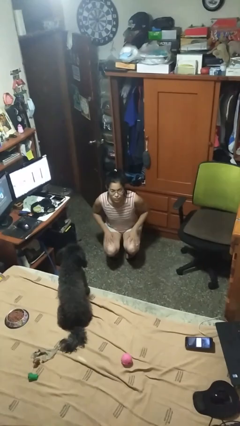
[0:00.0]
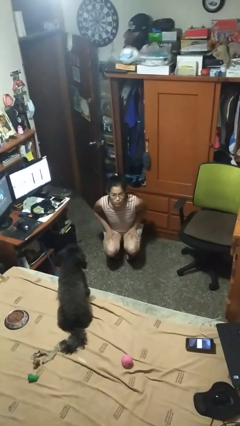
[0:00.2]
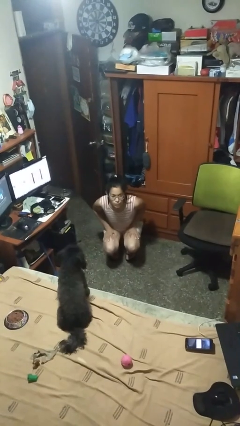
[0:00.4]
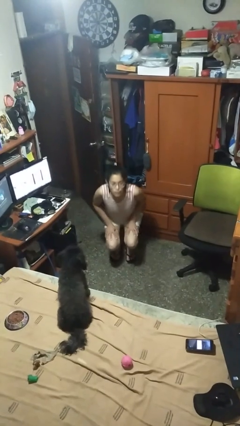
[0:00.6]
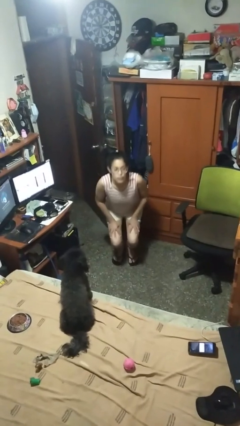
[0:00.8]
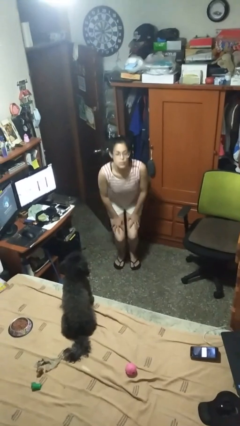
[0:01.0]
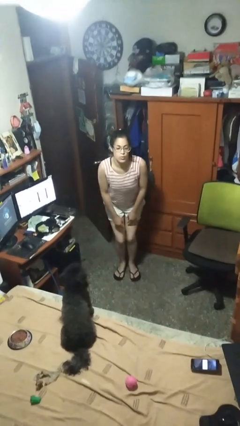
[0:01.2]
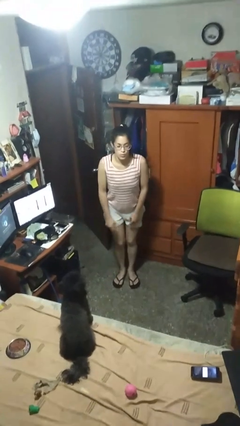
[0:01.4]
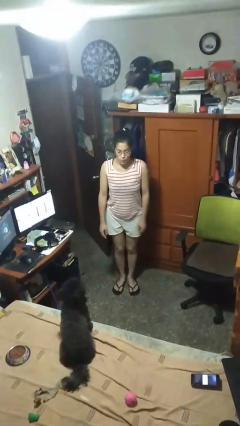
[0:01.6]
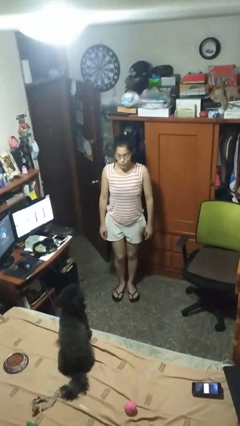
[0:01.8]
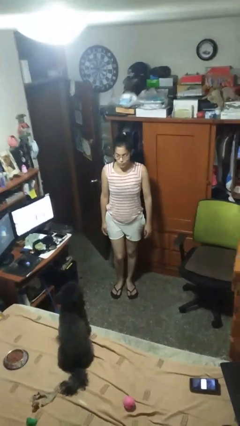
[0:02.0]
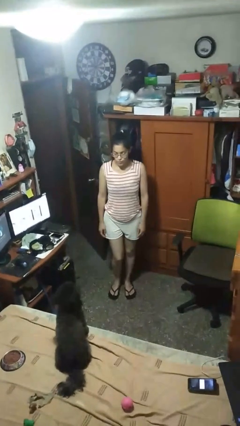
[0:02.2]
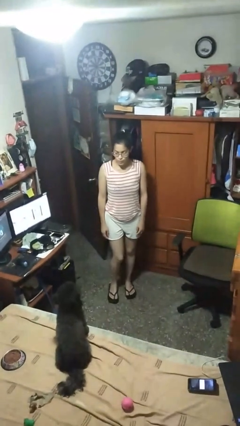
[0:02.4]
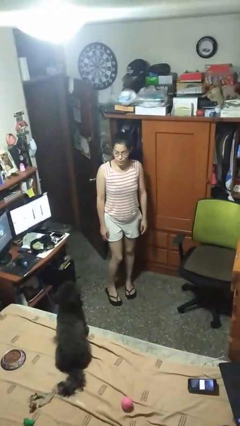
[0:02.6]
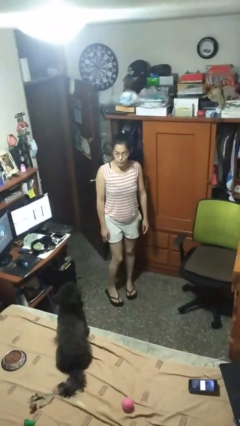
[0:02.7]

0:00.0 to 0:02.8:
person stands up

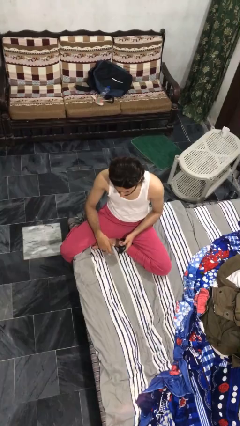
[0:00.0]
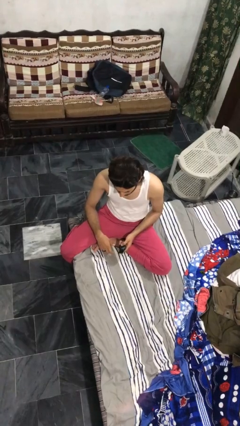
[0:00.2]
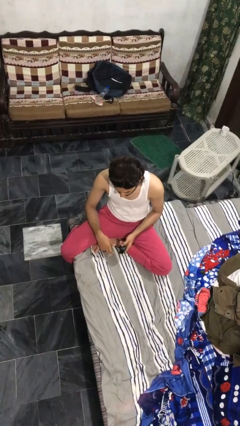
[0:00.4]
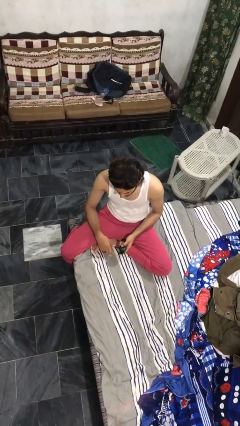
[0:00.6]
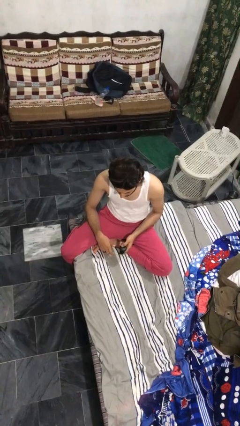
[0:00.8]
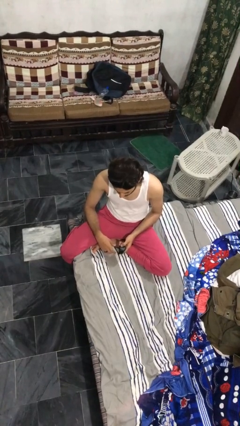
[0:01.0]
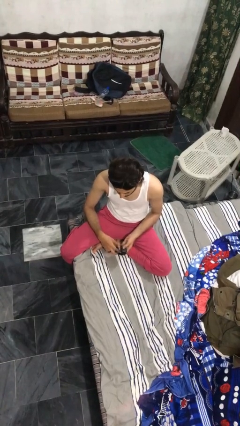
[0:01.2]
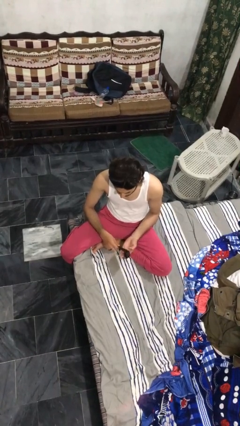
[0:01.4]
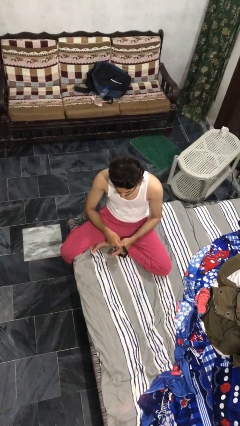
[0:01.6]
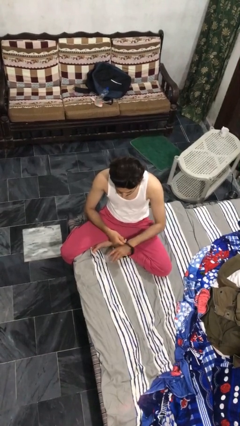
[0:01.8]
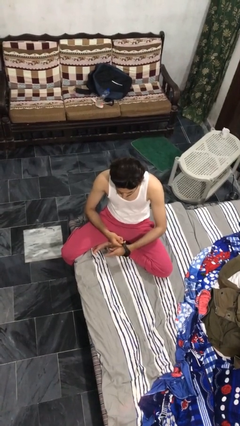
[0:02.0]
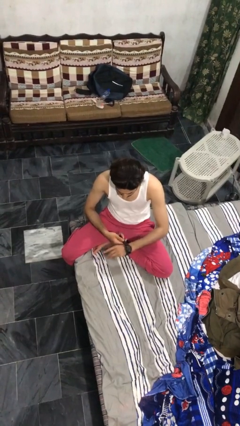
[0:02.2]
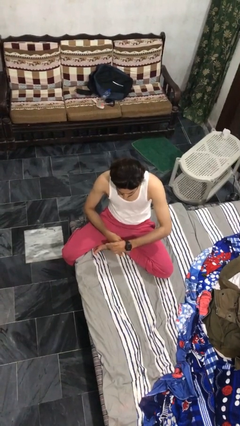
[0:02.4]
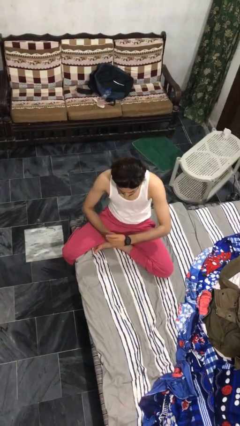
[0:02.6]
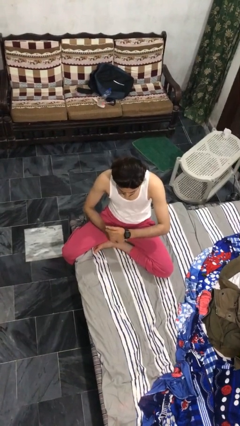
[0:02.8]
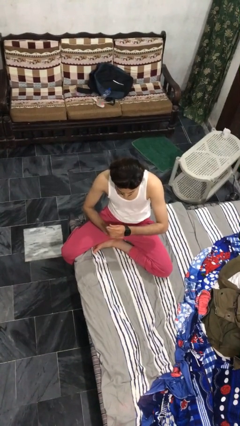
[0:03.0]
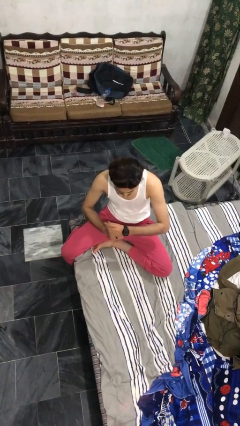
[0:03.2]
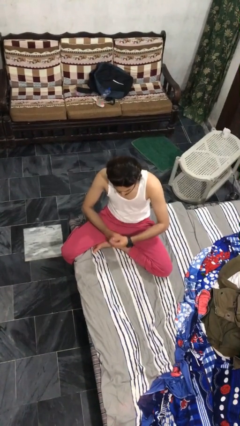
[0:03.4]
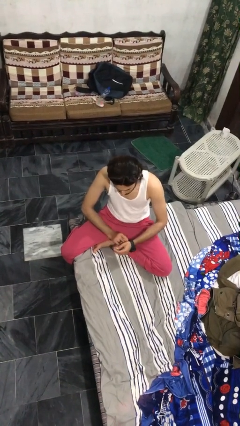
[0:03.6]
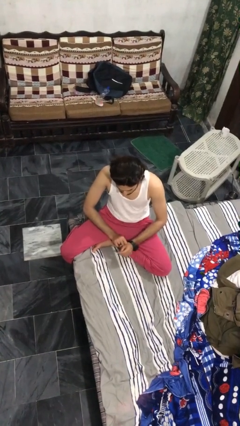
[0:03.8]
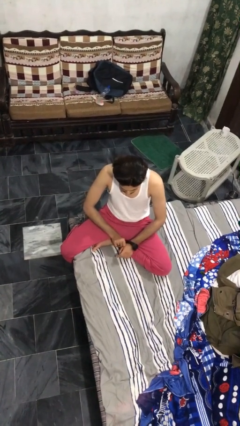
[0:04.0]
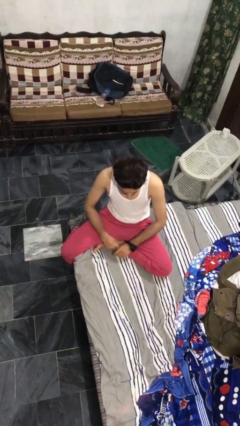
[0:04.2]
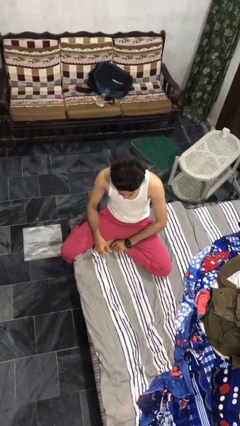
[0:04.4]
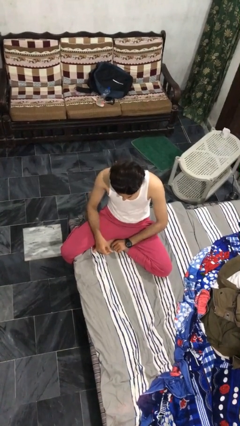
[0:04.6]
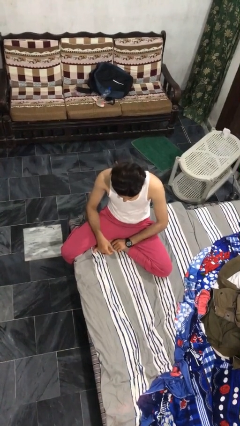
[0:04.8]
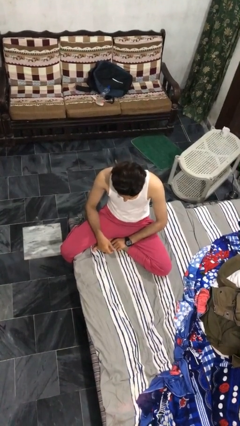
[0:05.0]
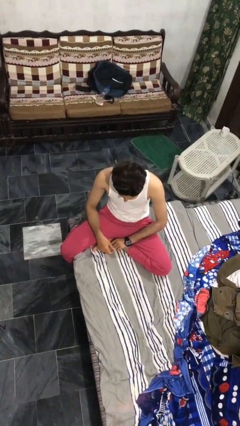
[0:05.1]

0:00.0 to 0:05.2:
person puts on wristwatch

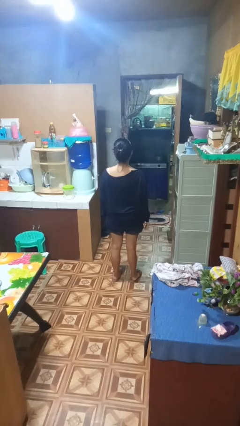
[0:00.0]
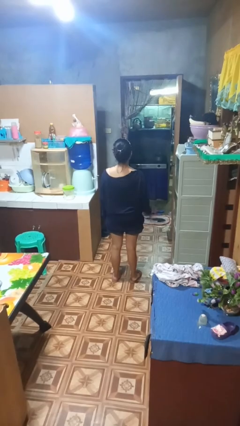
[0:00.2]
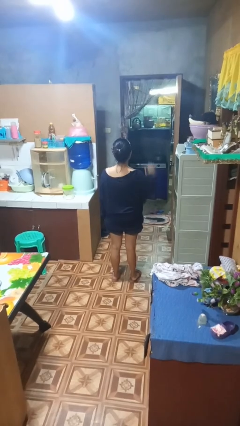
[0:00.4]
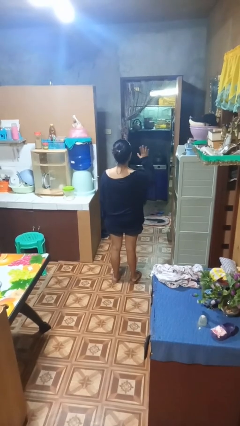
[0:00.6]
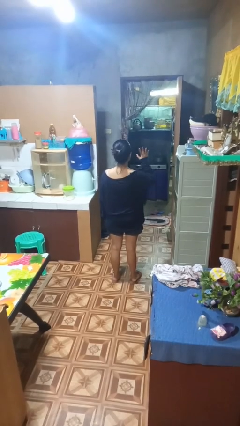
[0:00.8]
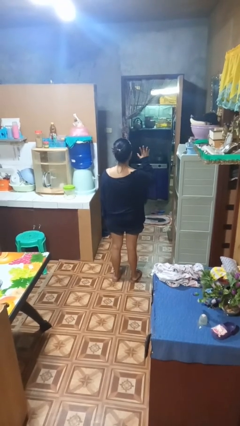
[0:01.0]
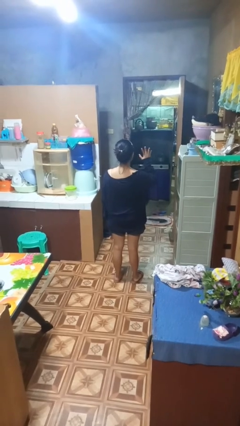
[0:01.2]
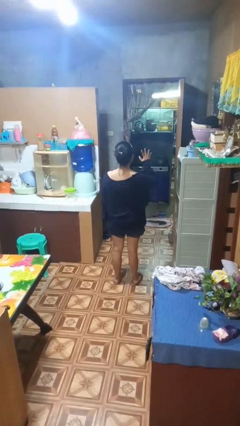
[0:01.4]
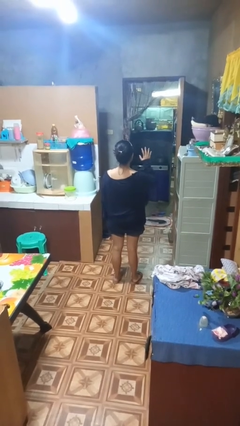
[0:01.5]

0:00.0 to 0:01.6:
person gestures number five

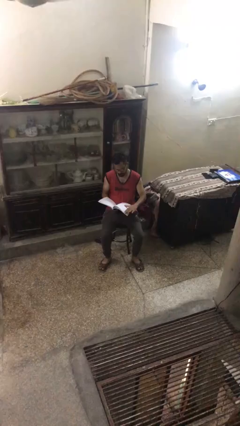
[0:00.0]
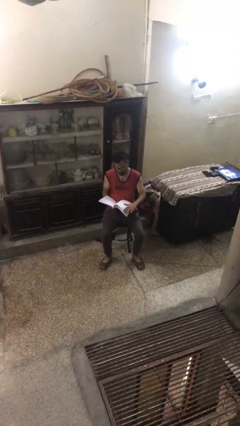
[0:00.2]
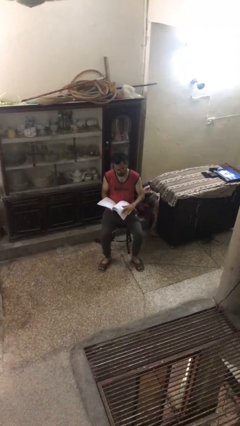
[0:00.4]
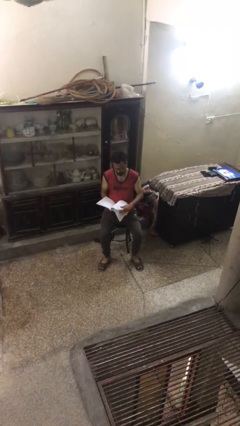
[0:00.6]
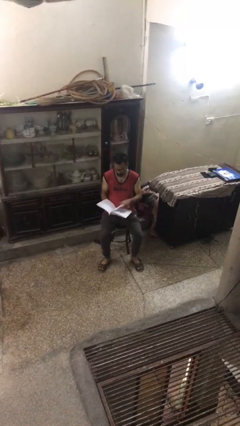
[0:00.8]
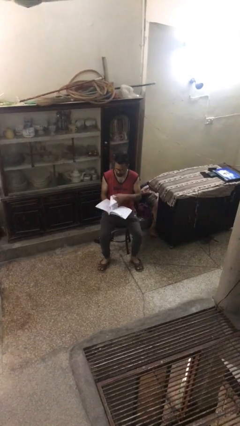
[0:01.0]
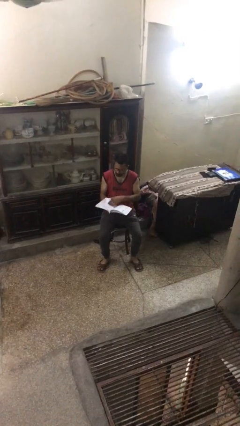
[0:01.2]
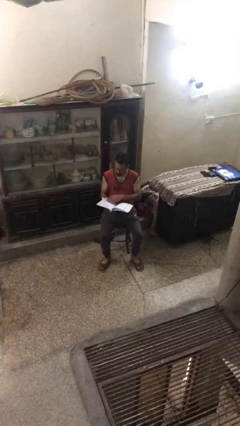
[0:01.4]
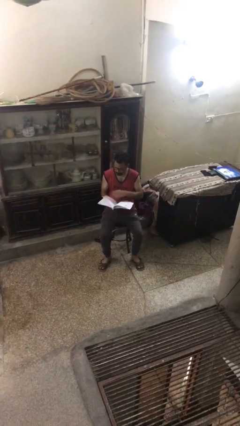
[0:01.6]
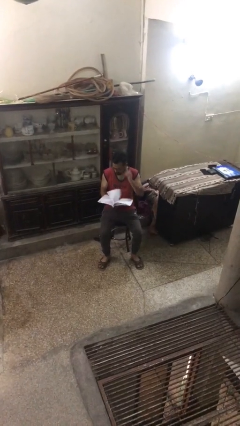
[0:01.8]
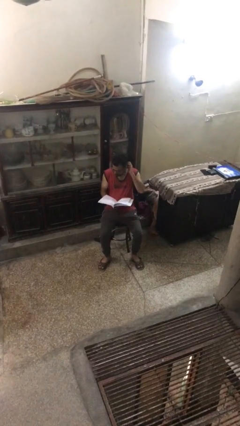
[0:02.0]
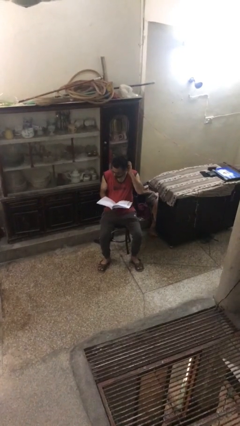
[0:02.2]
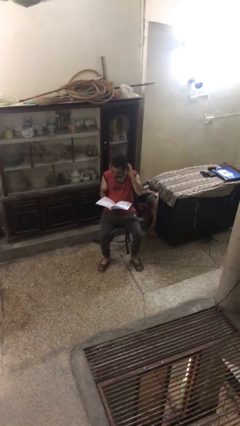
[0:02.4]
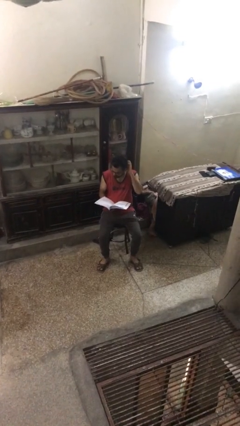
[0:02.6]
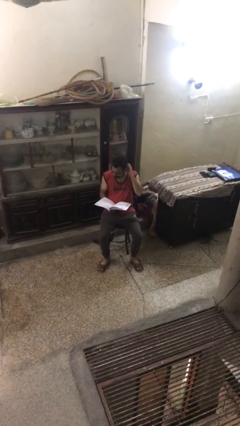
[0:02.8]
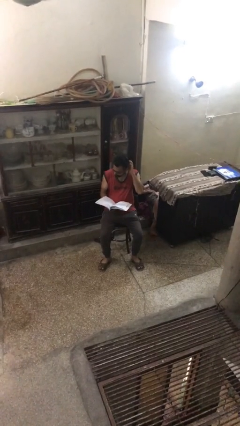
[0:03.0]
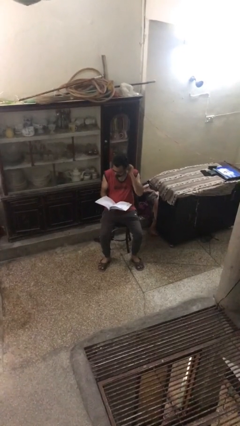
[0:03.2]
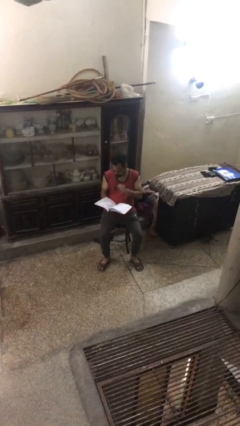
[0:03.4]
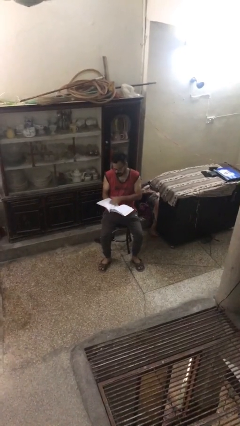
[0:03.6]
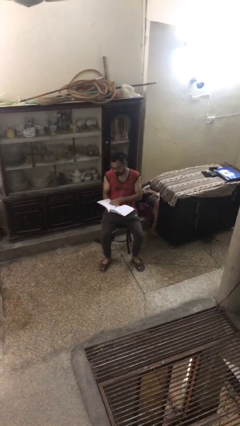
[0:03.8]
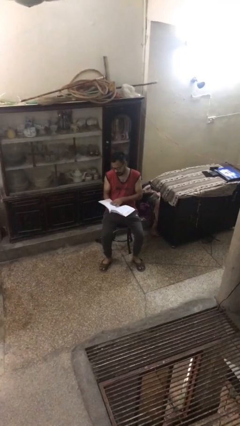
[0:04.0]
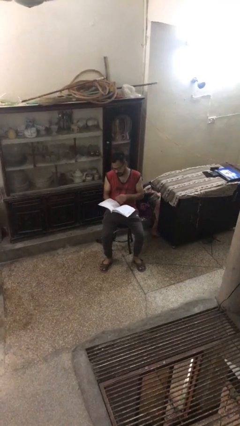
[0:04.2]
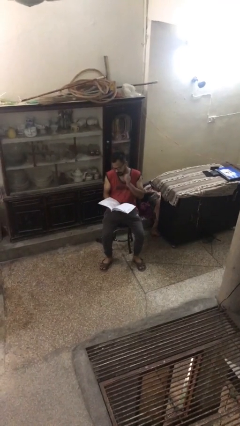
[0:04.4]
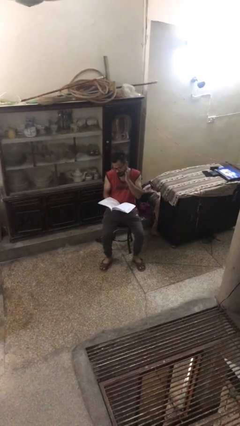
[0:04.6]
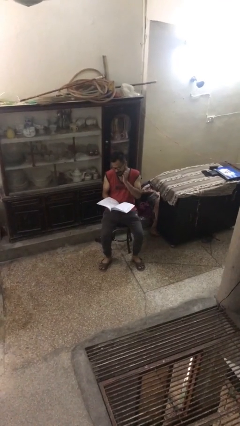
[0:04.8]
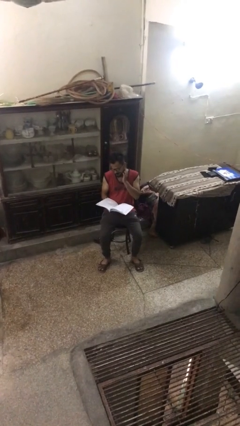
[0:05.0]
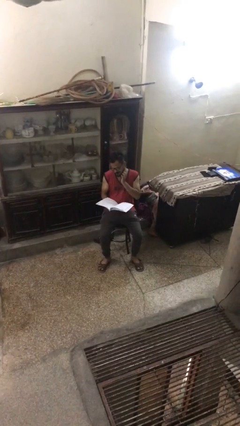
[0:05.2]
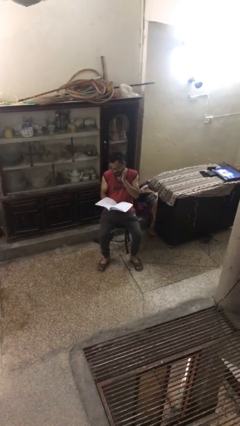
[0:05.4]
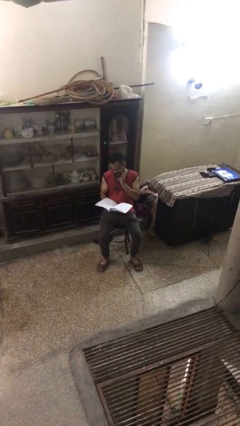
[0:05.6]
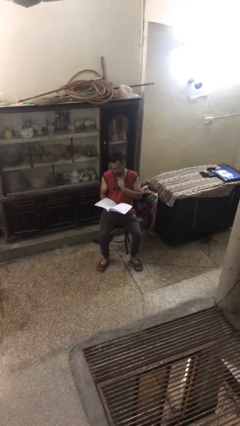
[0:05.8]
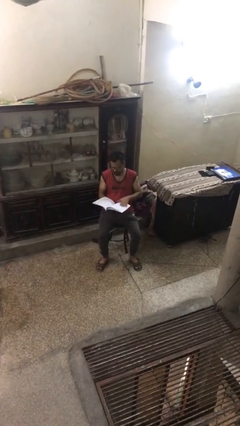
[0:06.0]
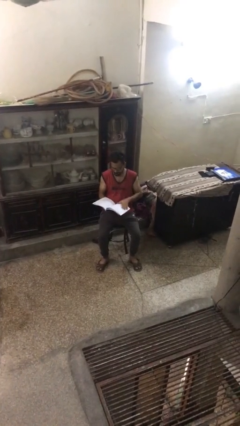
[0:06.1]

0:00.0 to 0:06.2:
person reads document

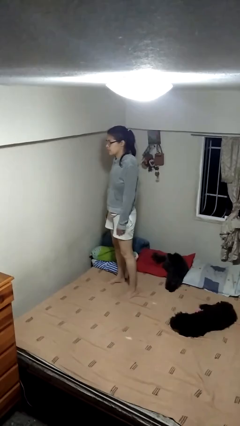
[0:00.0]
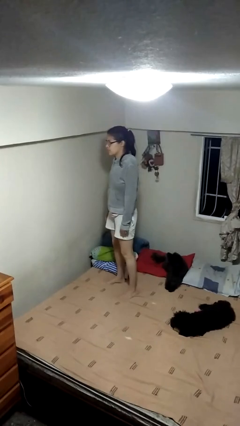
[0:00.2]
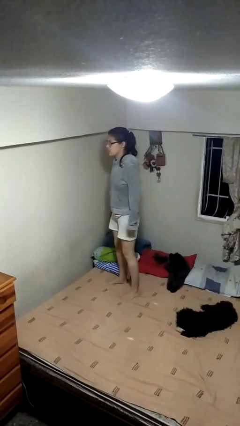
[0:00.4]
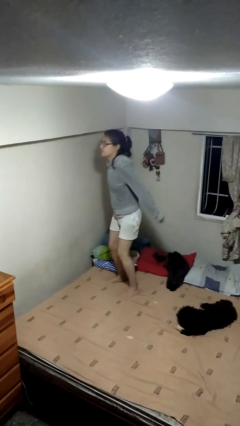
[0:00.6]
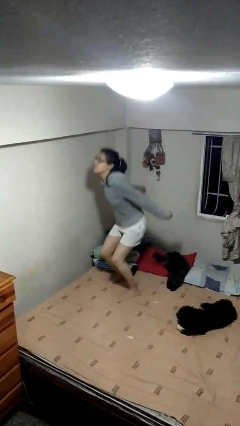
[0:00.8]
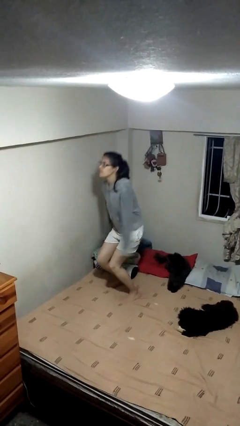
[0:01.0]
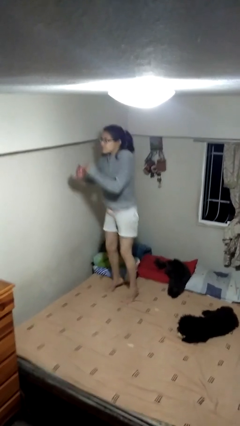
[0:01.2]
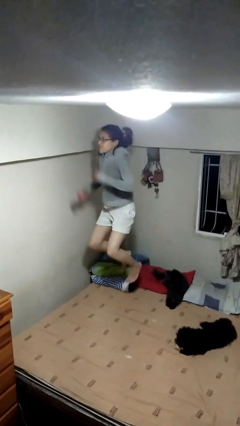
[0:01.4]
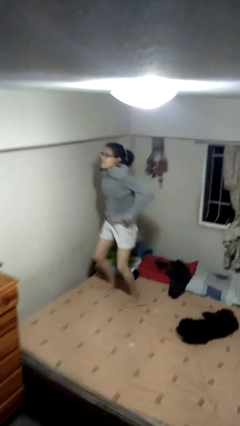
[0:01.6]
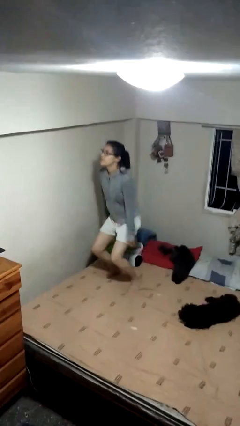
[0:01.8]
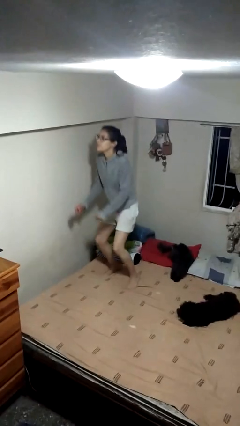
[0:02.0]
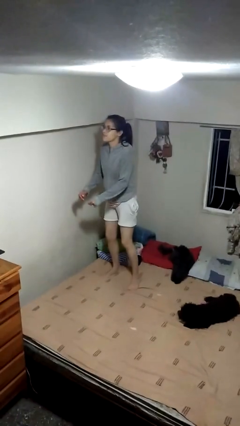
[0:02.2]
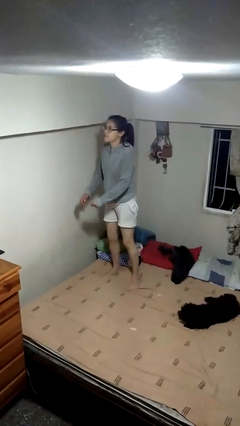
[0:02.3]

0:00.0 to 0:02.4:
person jumps on bed
